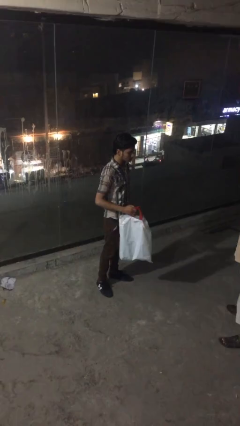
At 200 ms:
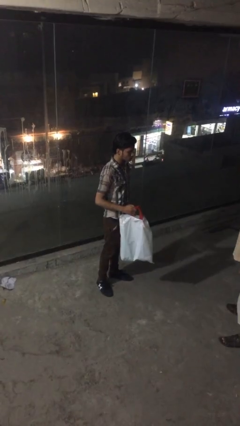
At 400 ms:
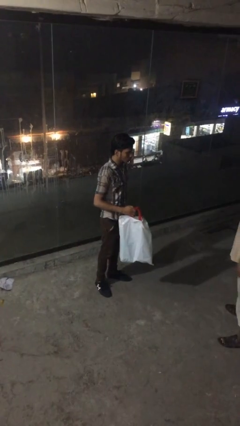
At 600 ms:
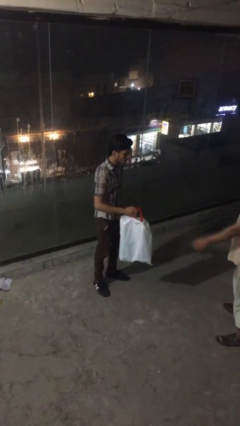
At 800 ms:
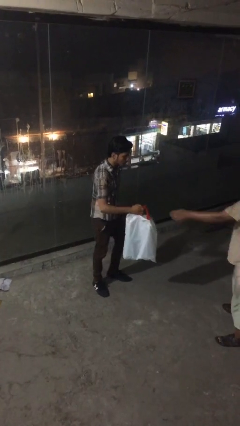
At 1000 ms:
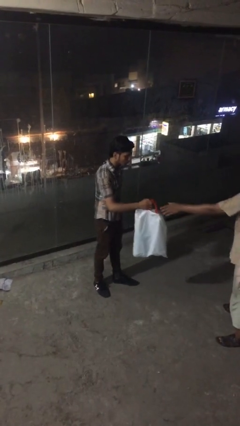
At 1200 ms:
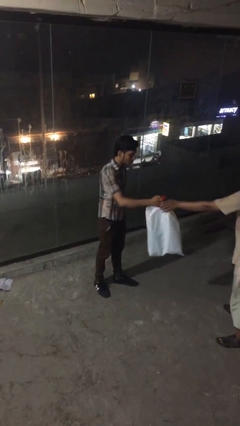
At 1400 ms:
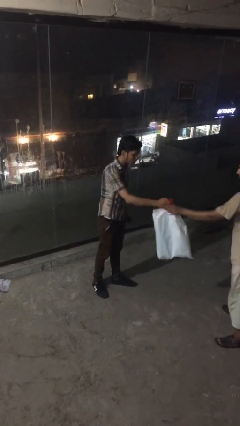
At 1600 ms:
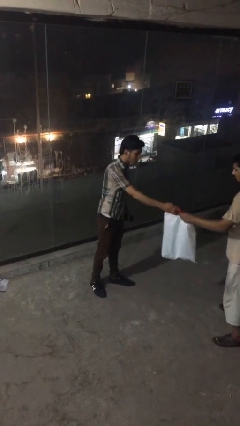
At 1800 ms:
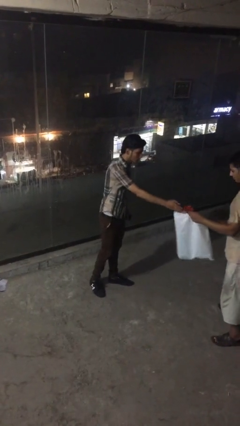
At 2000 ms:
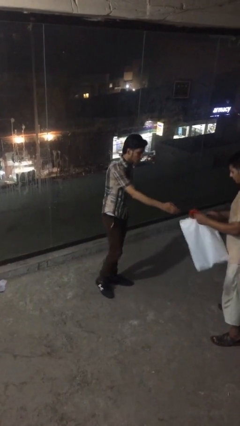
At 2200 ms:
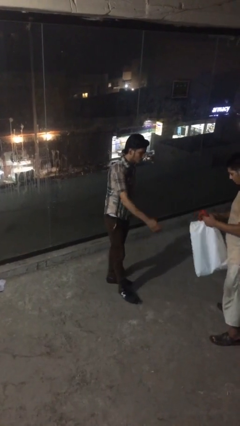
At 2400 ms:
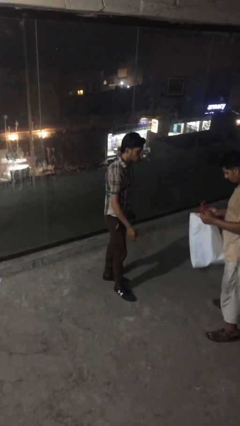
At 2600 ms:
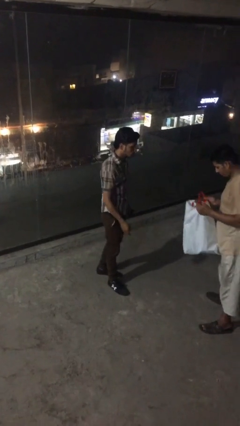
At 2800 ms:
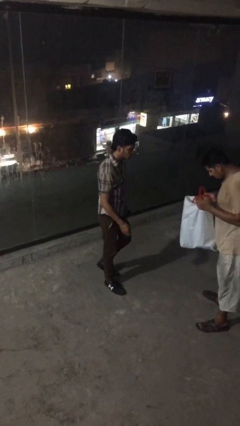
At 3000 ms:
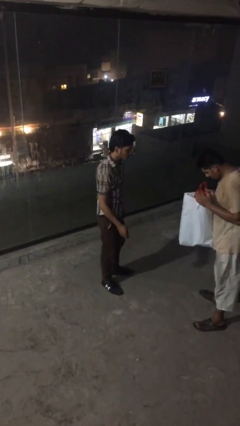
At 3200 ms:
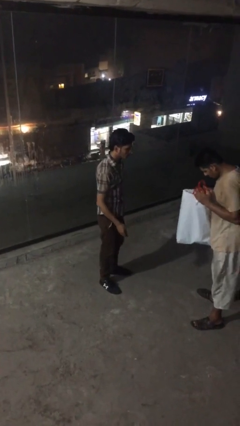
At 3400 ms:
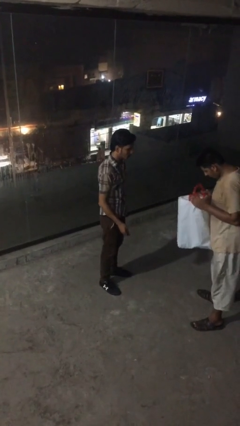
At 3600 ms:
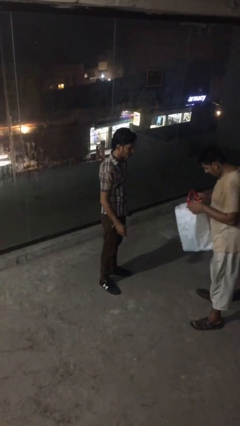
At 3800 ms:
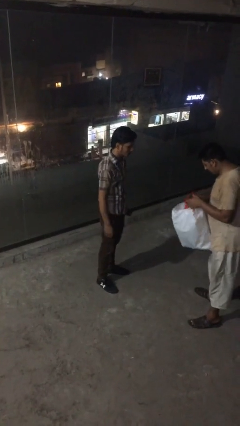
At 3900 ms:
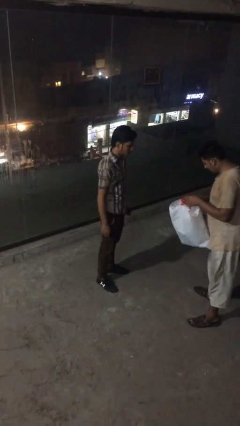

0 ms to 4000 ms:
person transfers object to person

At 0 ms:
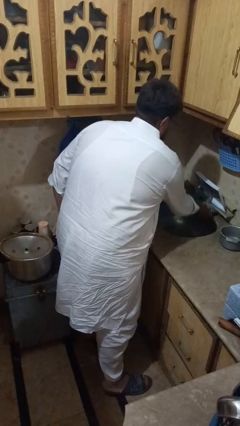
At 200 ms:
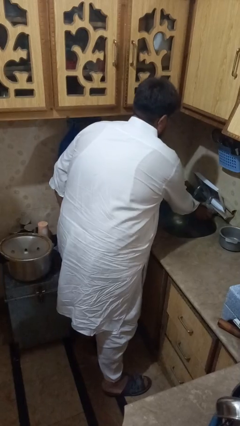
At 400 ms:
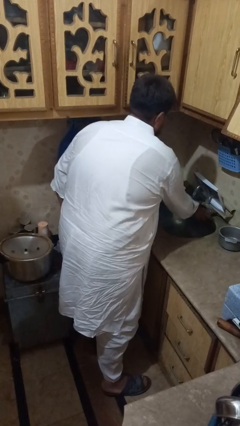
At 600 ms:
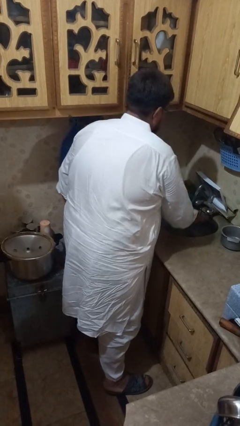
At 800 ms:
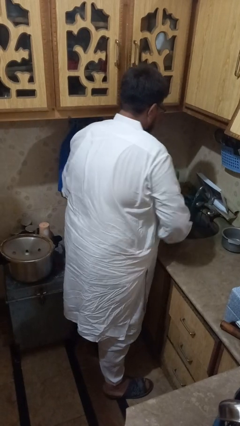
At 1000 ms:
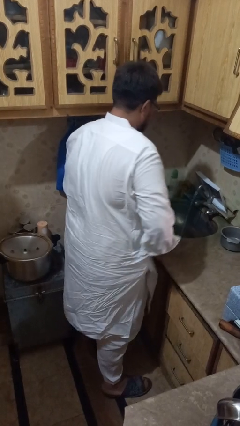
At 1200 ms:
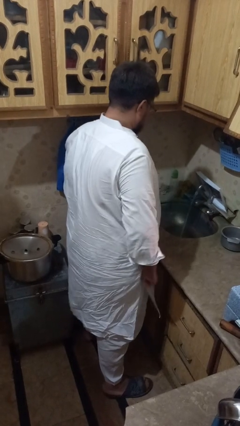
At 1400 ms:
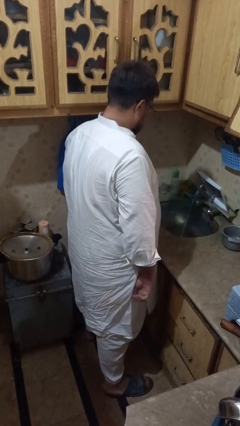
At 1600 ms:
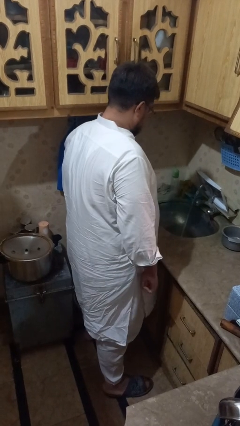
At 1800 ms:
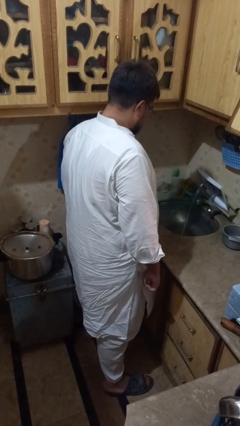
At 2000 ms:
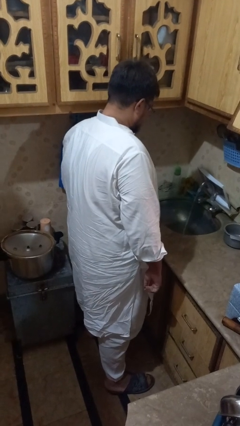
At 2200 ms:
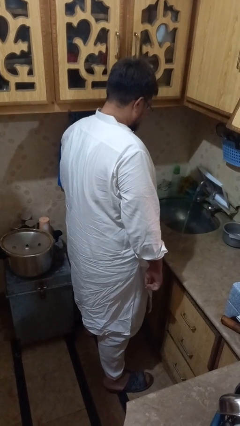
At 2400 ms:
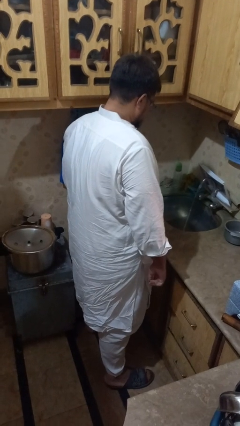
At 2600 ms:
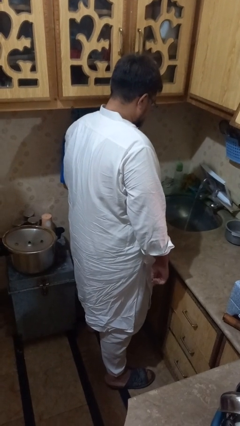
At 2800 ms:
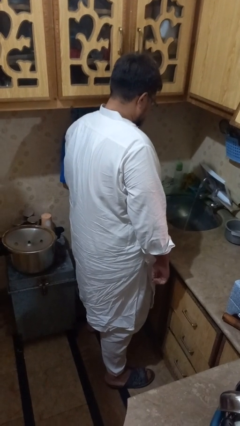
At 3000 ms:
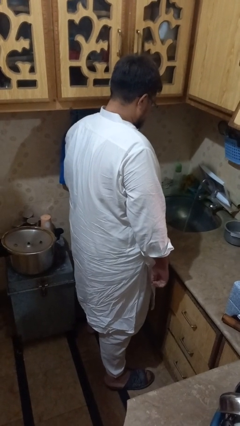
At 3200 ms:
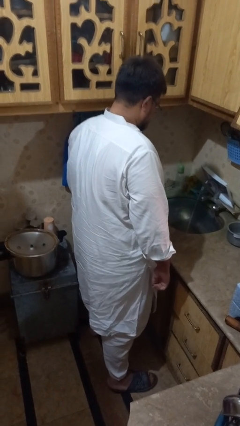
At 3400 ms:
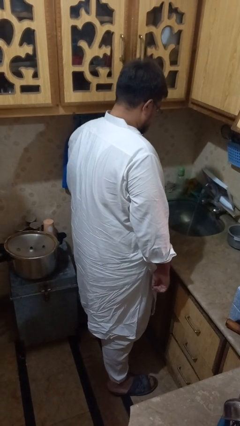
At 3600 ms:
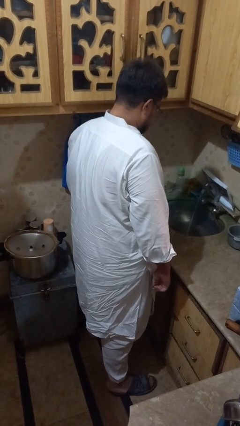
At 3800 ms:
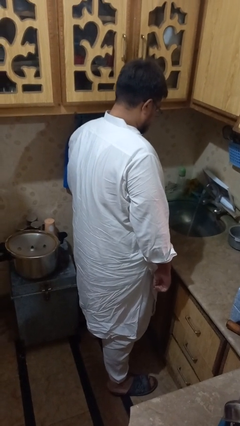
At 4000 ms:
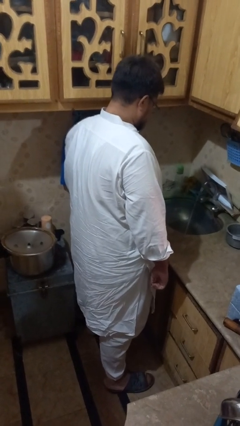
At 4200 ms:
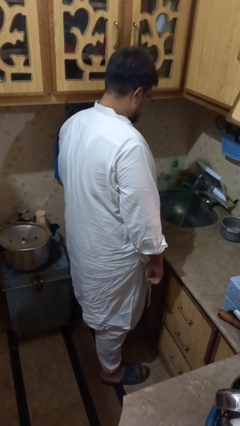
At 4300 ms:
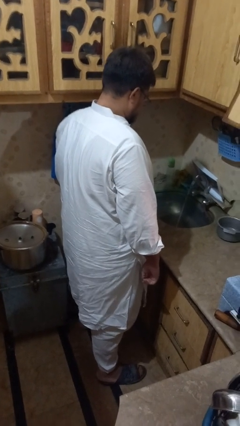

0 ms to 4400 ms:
person turns on faucet

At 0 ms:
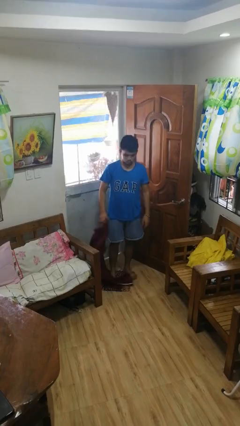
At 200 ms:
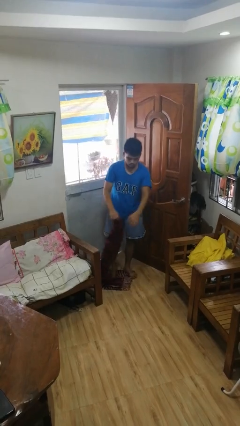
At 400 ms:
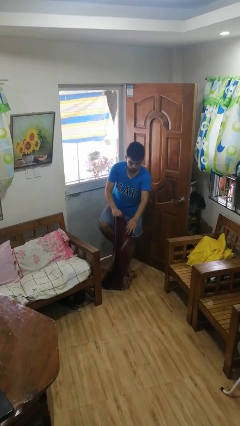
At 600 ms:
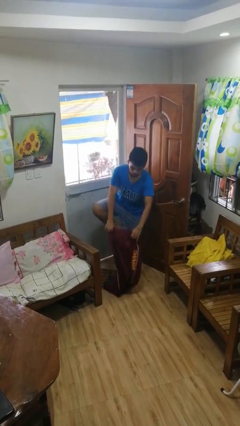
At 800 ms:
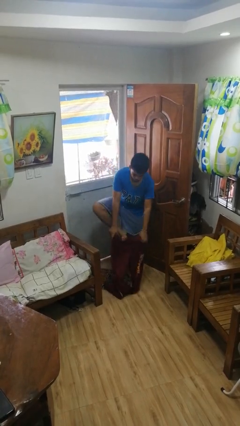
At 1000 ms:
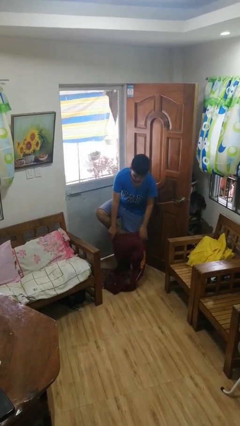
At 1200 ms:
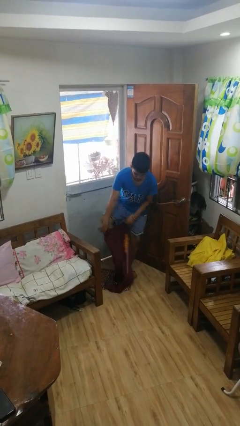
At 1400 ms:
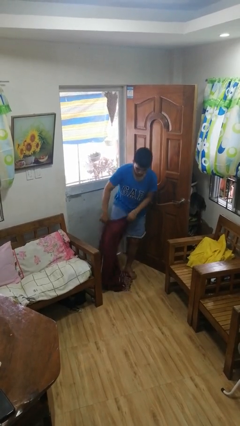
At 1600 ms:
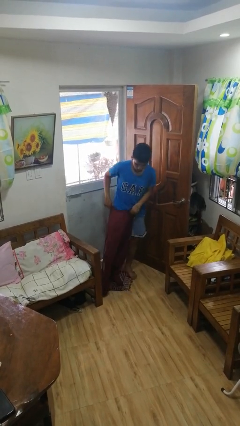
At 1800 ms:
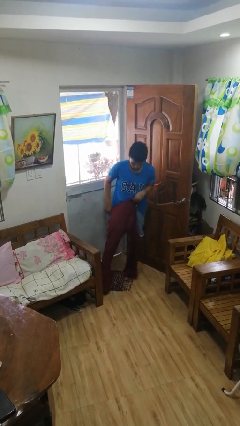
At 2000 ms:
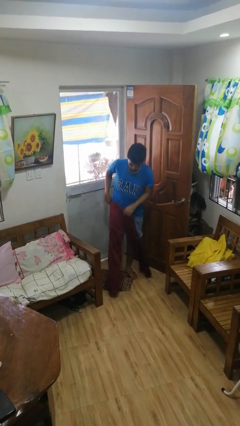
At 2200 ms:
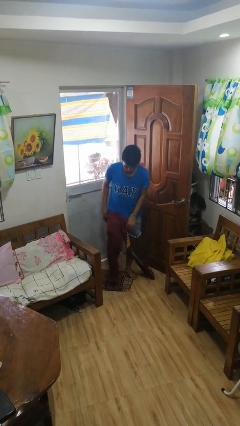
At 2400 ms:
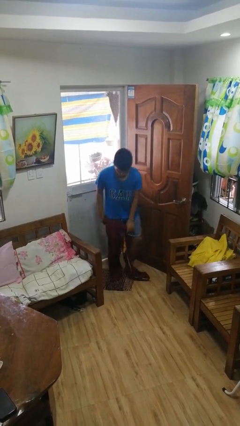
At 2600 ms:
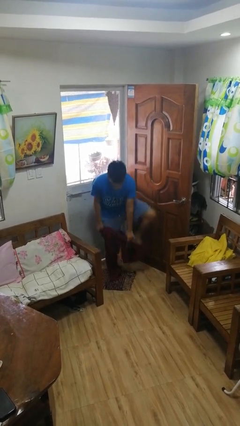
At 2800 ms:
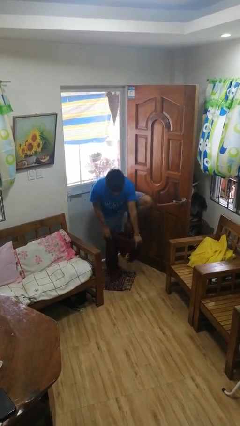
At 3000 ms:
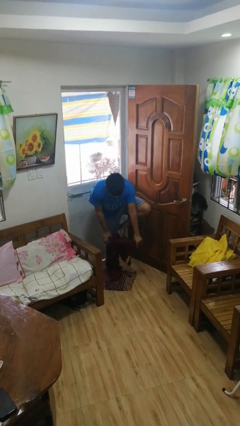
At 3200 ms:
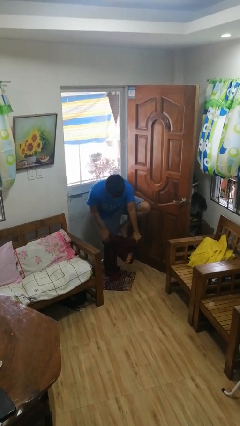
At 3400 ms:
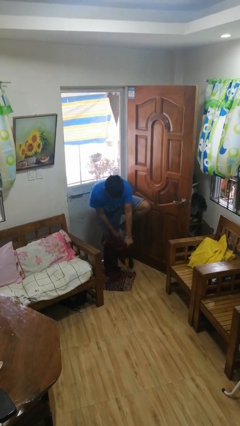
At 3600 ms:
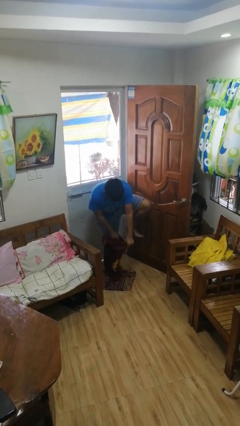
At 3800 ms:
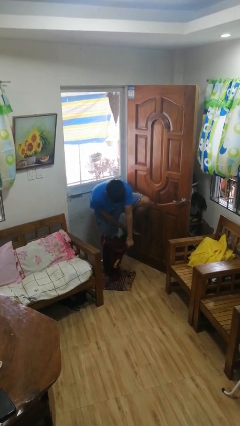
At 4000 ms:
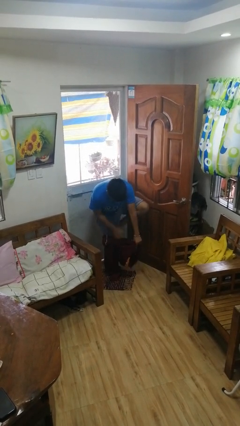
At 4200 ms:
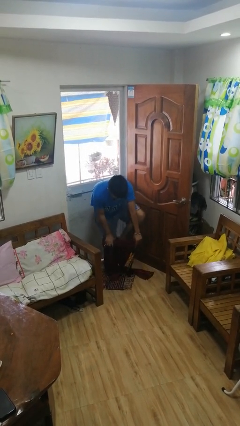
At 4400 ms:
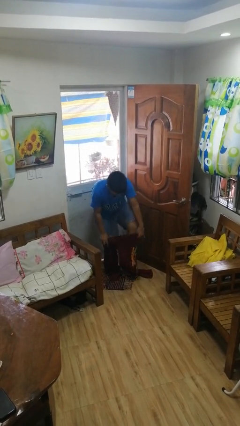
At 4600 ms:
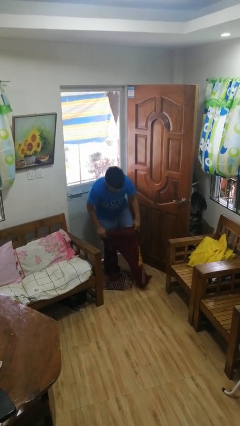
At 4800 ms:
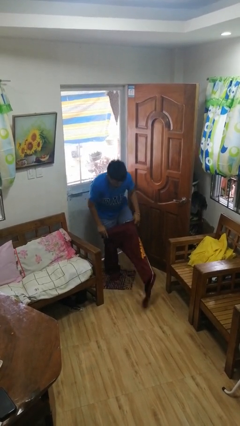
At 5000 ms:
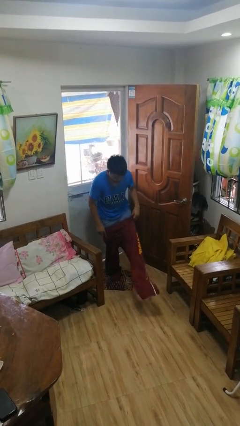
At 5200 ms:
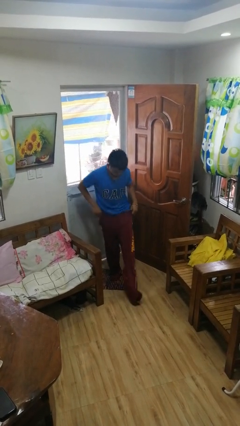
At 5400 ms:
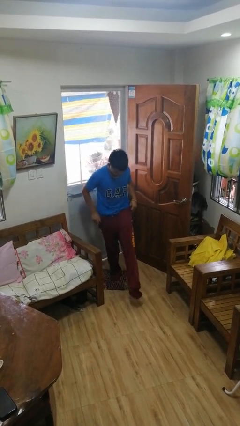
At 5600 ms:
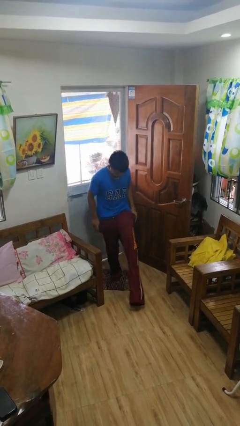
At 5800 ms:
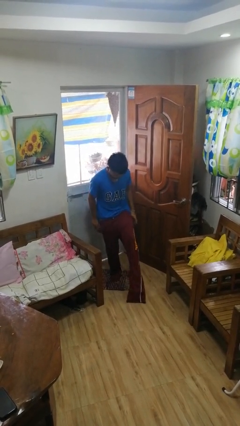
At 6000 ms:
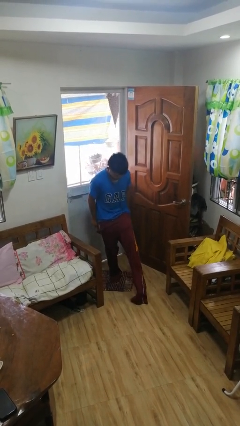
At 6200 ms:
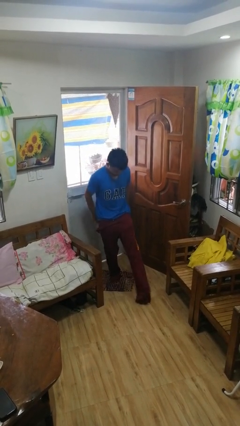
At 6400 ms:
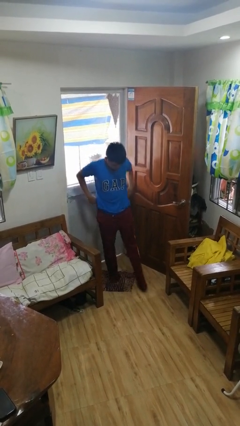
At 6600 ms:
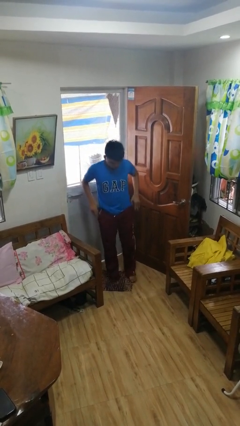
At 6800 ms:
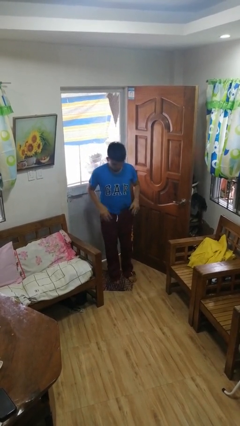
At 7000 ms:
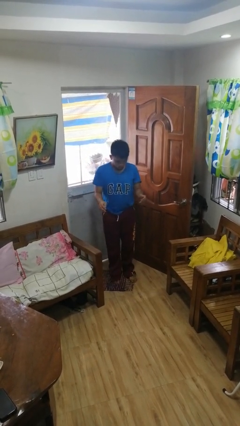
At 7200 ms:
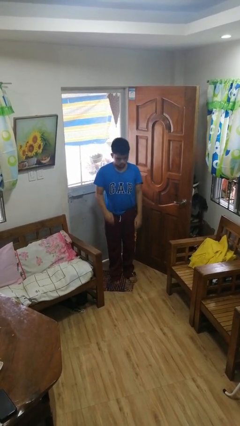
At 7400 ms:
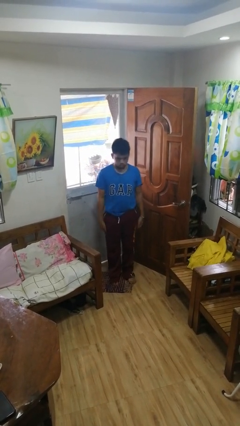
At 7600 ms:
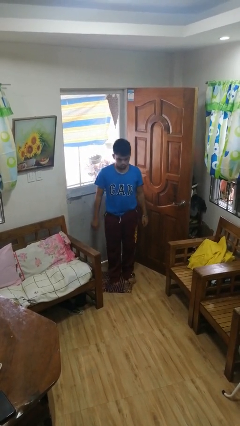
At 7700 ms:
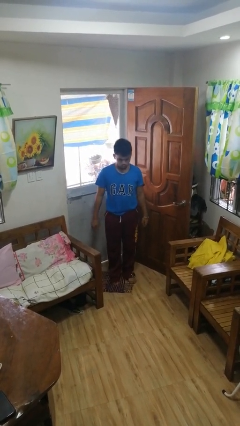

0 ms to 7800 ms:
person puts on pants

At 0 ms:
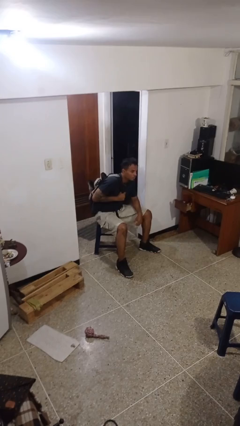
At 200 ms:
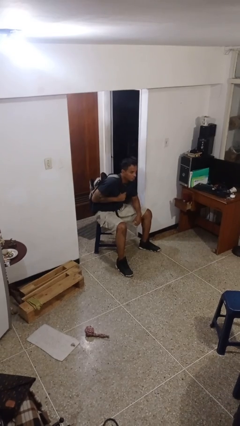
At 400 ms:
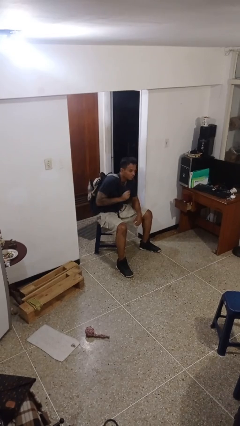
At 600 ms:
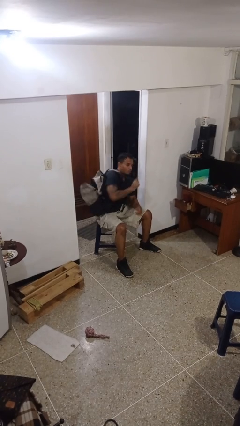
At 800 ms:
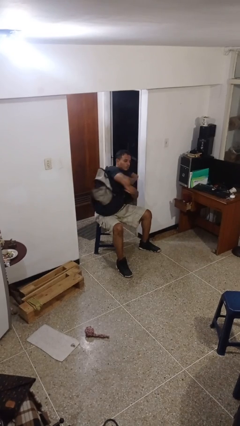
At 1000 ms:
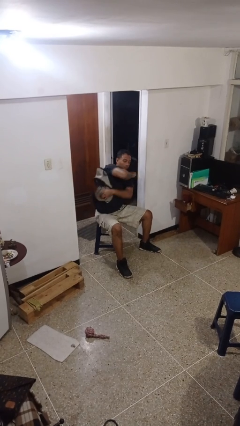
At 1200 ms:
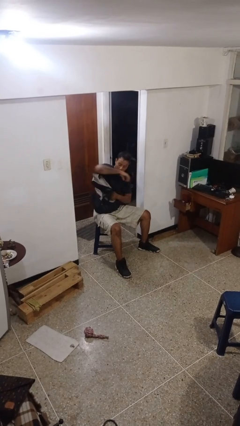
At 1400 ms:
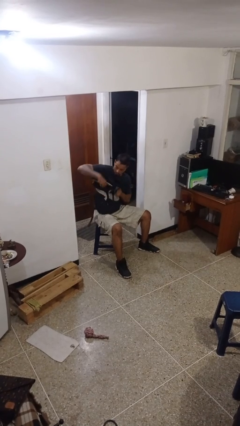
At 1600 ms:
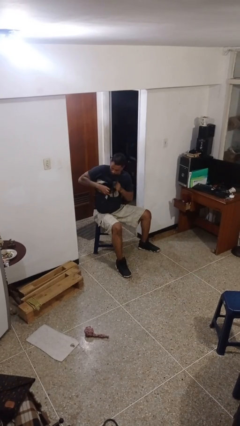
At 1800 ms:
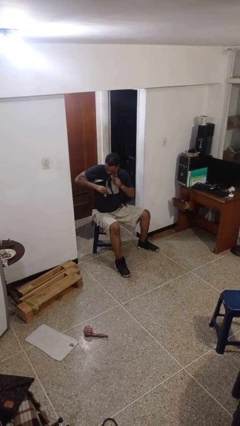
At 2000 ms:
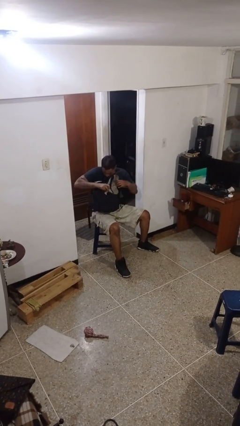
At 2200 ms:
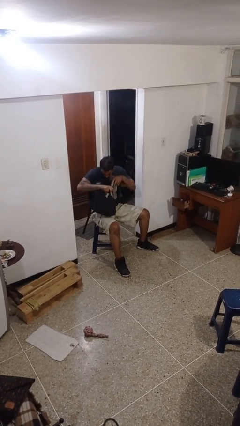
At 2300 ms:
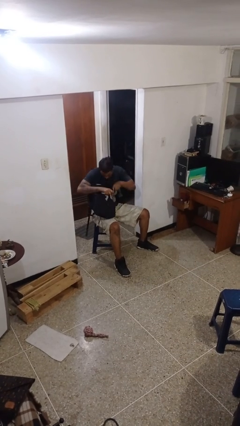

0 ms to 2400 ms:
person searches in backpack
